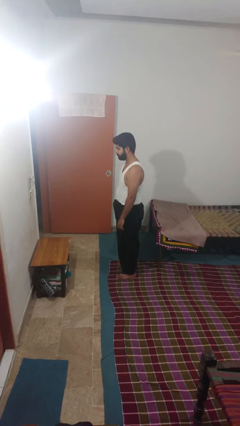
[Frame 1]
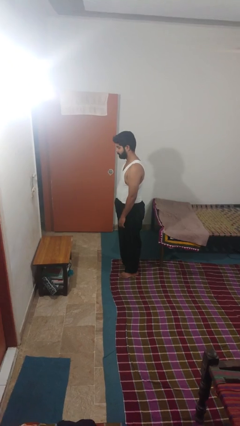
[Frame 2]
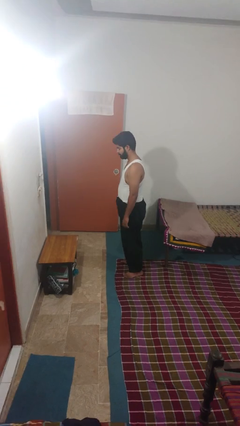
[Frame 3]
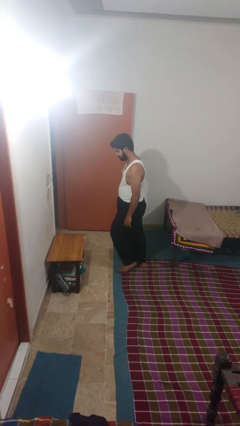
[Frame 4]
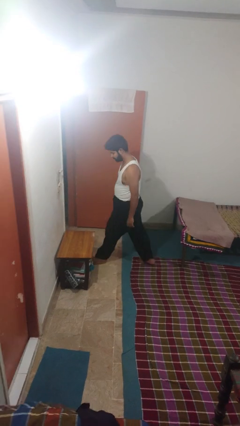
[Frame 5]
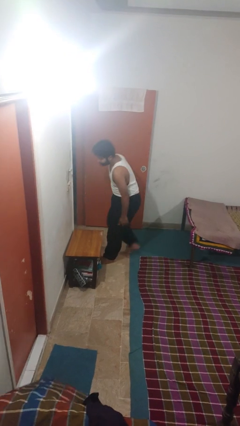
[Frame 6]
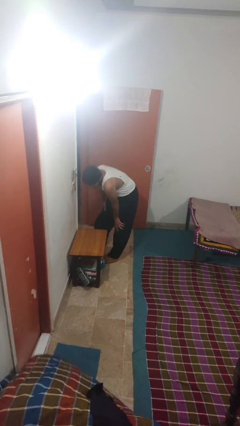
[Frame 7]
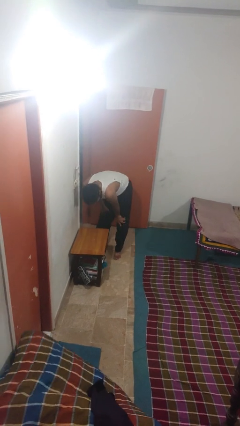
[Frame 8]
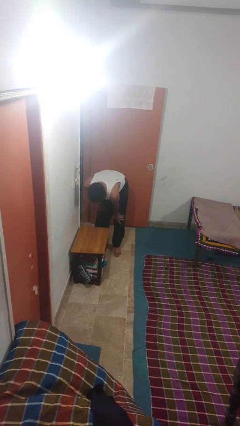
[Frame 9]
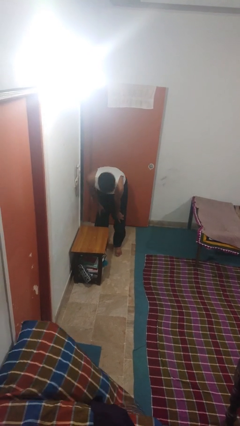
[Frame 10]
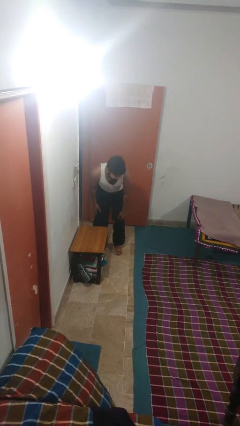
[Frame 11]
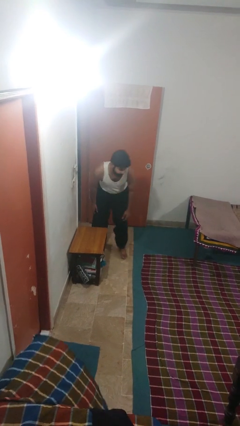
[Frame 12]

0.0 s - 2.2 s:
person bumps into table

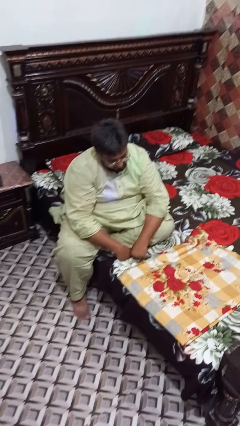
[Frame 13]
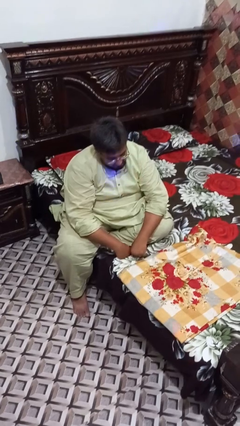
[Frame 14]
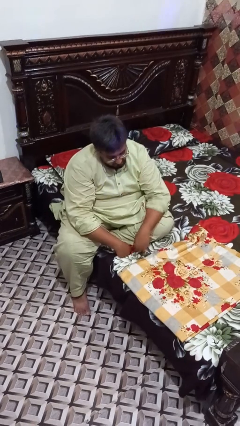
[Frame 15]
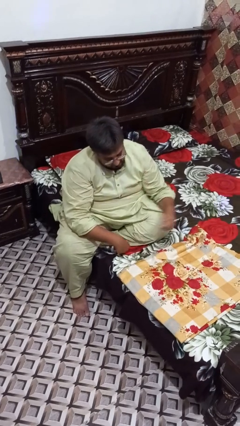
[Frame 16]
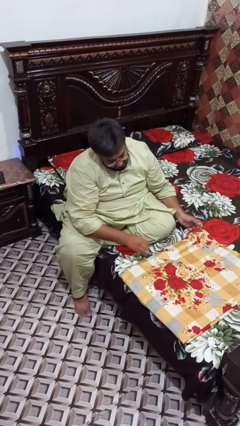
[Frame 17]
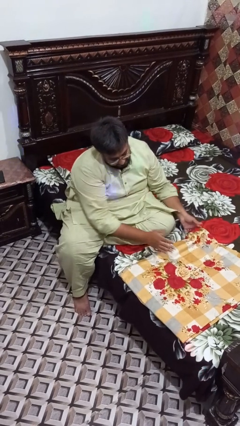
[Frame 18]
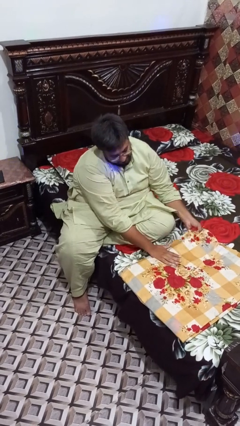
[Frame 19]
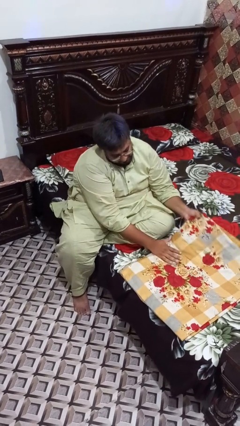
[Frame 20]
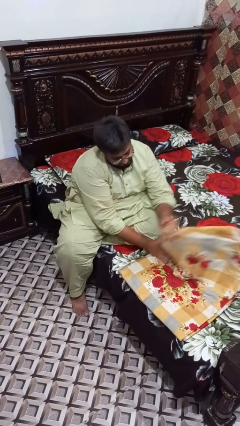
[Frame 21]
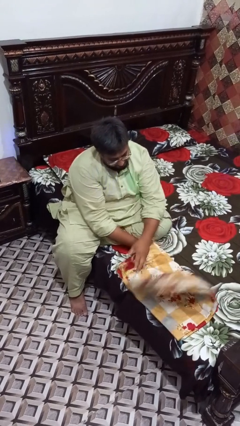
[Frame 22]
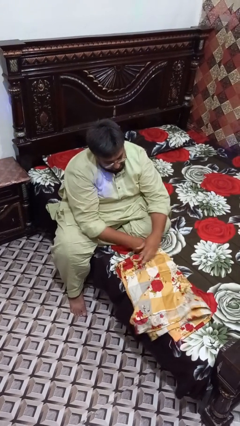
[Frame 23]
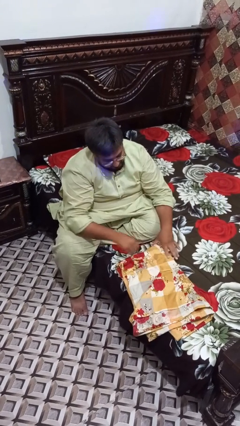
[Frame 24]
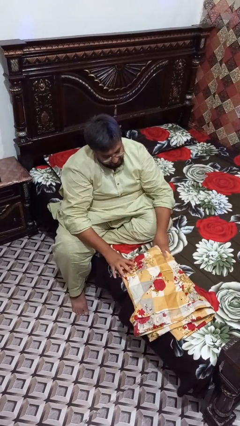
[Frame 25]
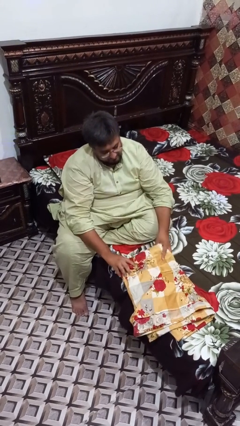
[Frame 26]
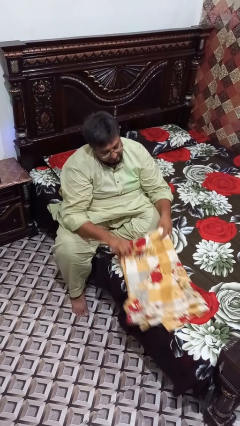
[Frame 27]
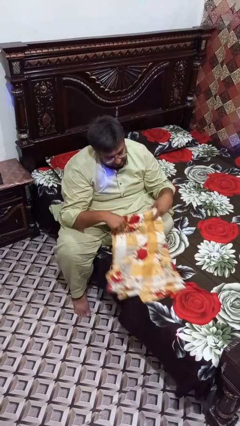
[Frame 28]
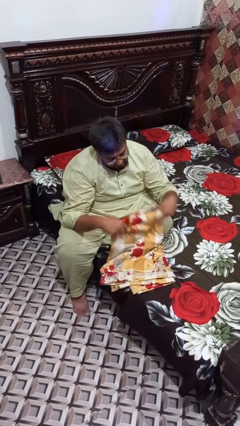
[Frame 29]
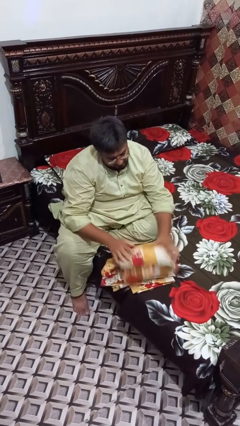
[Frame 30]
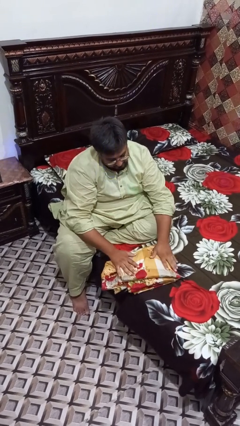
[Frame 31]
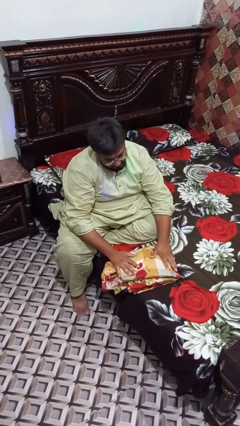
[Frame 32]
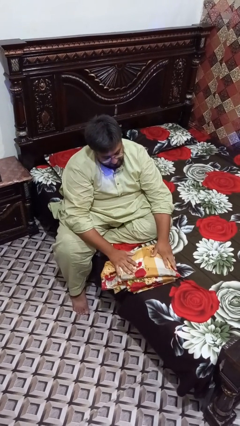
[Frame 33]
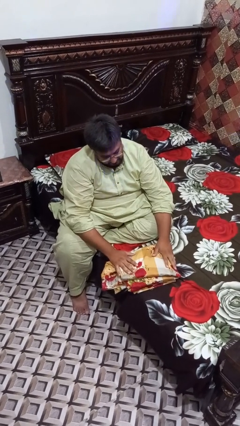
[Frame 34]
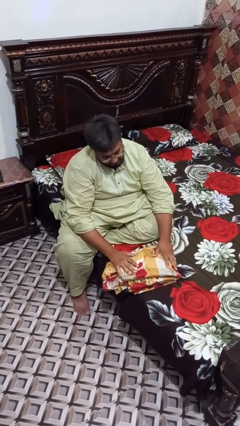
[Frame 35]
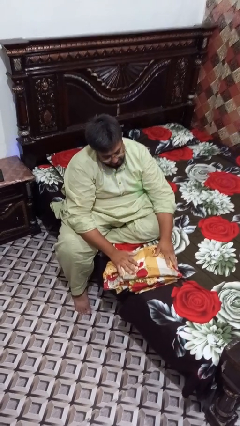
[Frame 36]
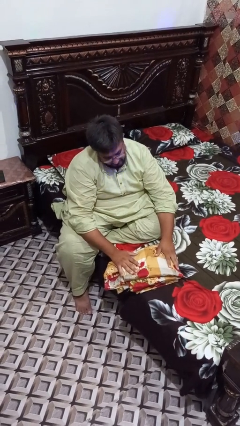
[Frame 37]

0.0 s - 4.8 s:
person folds blanket

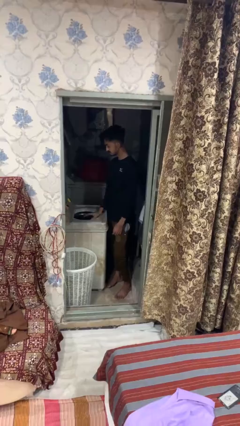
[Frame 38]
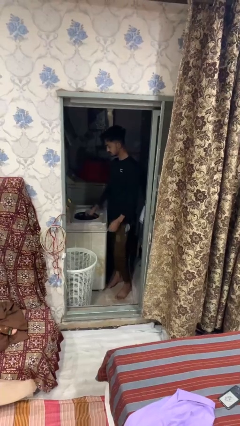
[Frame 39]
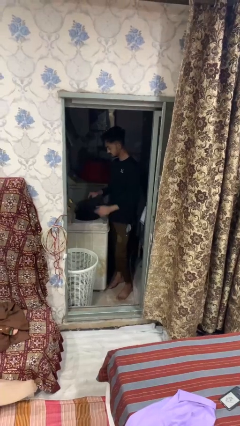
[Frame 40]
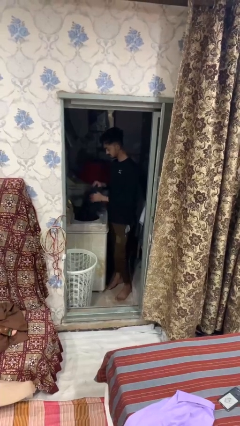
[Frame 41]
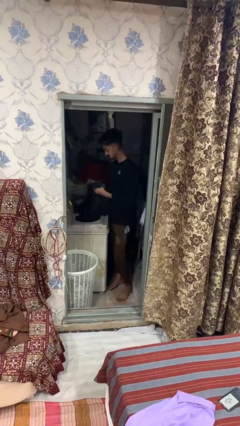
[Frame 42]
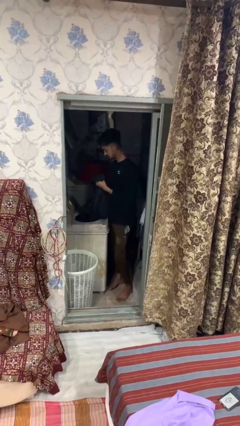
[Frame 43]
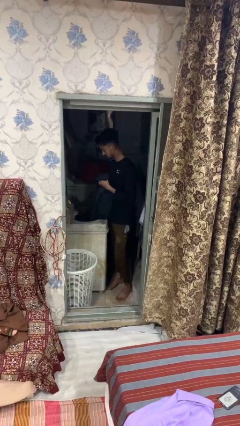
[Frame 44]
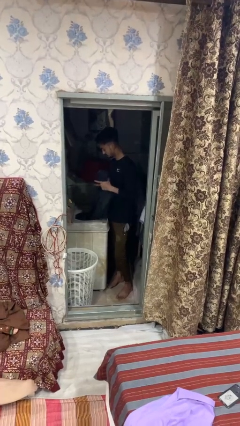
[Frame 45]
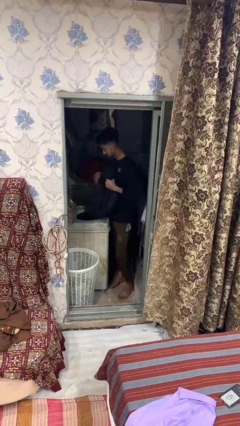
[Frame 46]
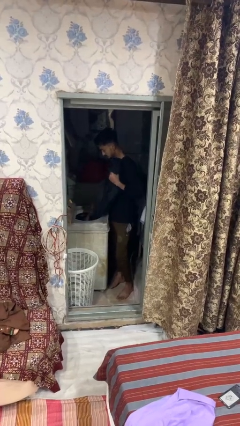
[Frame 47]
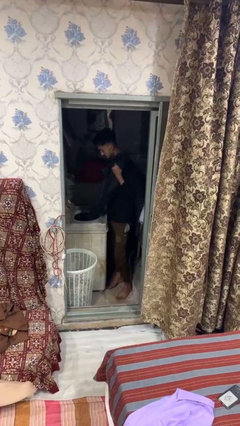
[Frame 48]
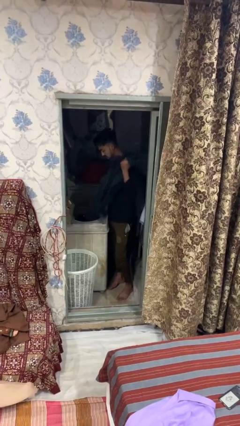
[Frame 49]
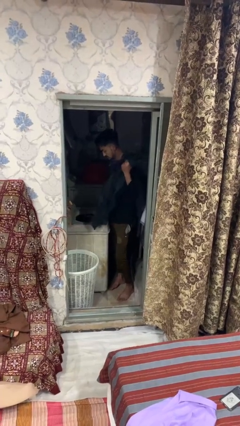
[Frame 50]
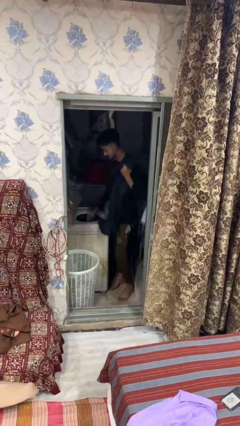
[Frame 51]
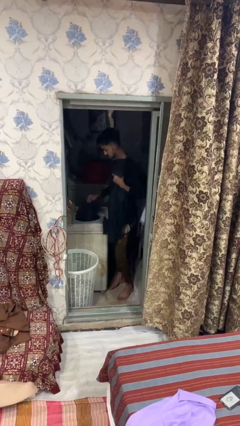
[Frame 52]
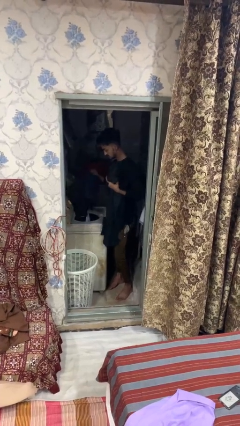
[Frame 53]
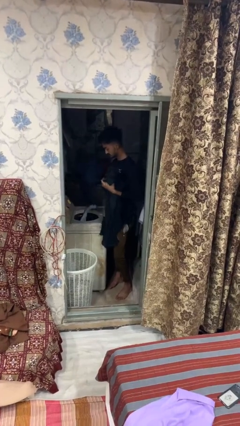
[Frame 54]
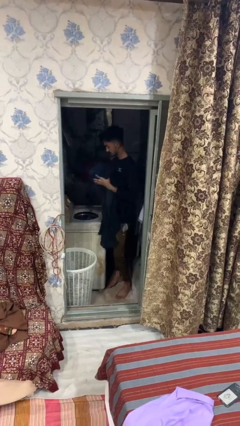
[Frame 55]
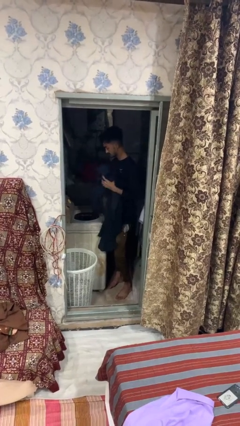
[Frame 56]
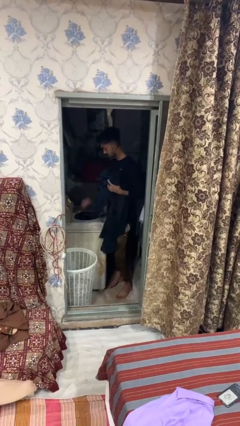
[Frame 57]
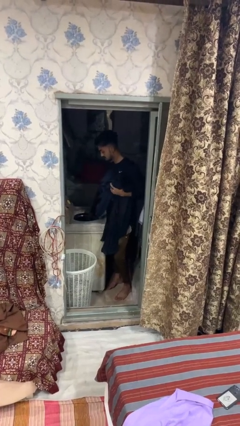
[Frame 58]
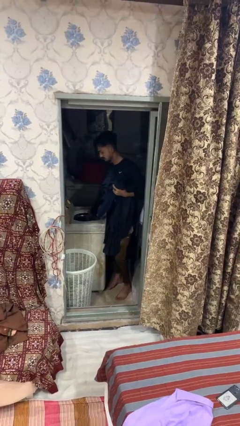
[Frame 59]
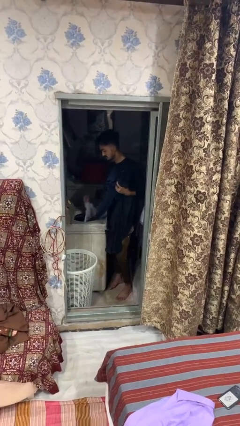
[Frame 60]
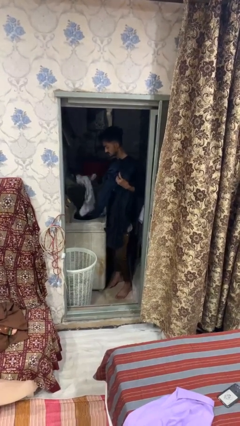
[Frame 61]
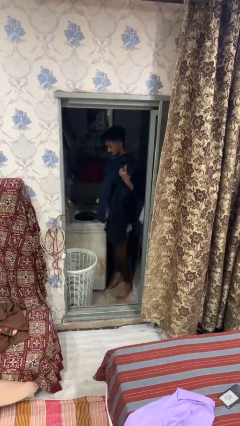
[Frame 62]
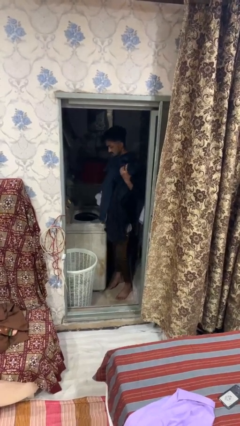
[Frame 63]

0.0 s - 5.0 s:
person unloads clotheswasher

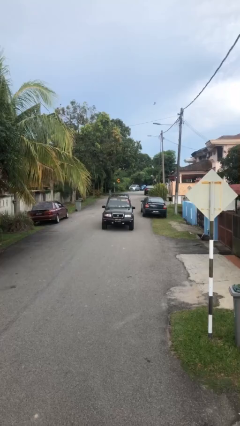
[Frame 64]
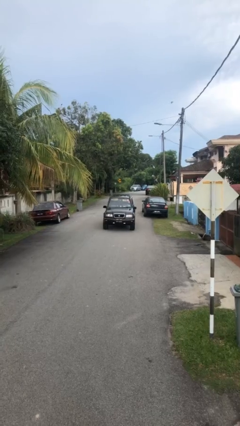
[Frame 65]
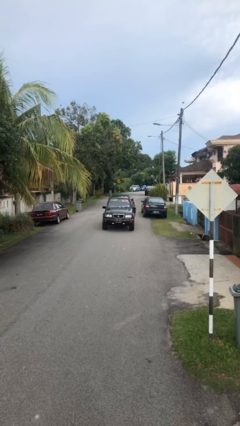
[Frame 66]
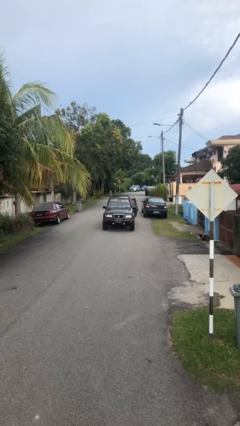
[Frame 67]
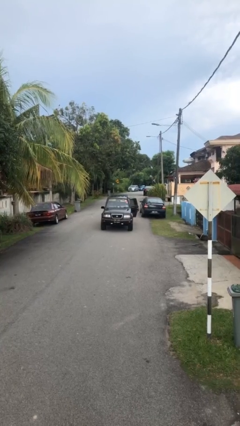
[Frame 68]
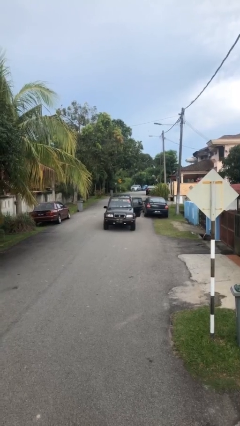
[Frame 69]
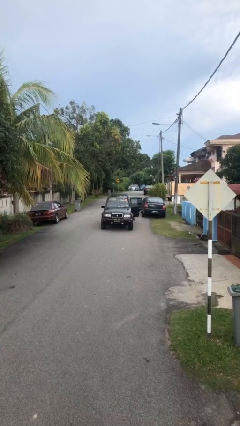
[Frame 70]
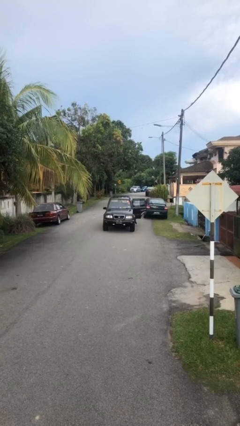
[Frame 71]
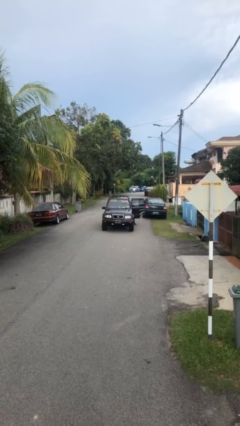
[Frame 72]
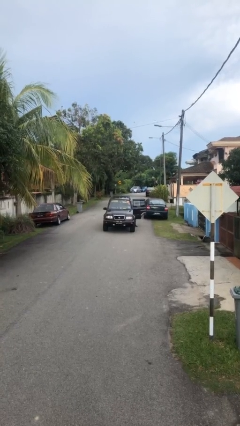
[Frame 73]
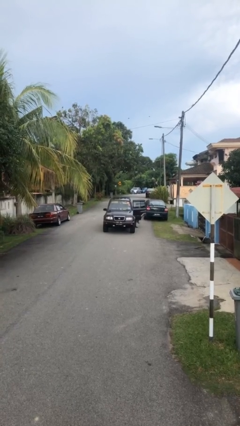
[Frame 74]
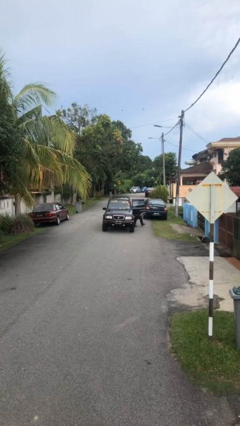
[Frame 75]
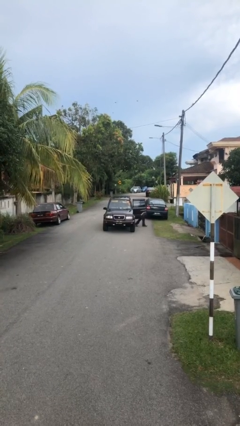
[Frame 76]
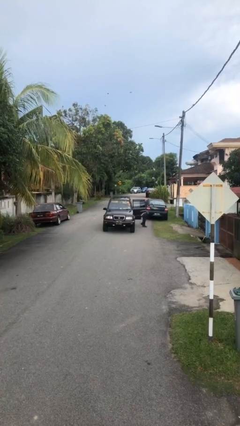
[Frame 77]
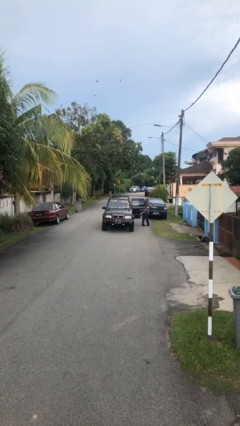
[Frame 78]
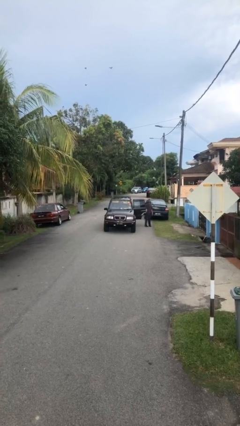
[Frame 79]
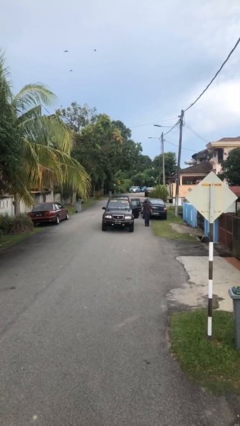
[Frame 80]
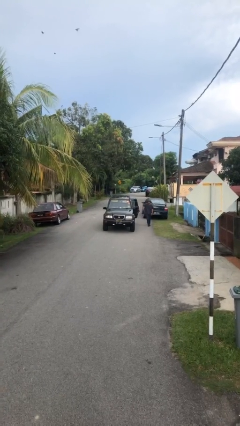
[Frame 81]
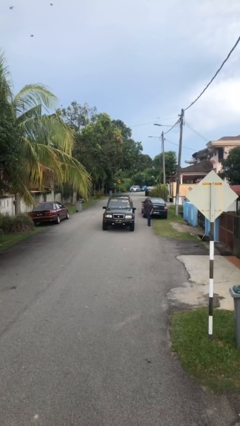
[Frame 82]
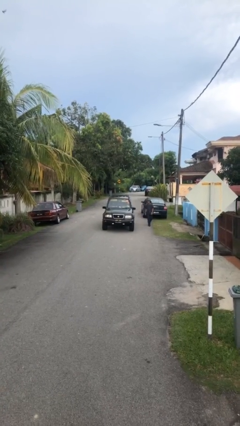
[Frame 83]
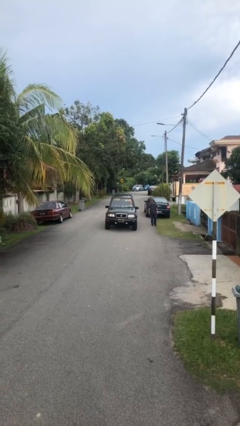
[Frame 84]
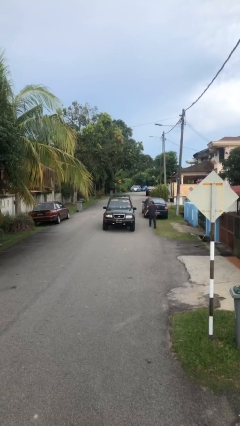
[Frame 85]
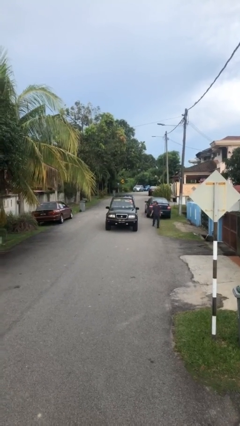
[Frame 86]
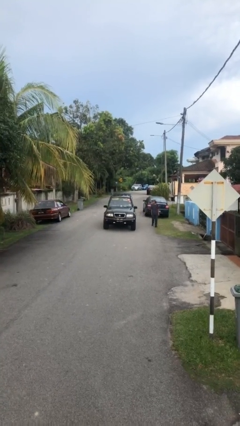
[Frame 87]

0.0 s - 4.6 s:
car drops off person

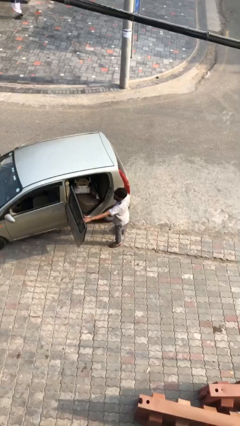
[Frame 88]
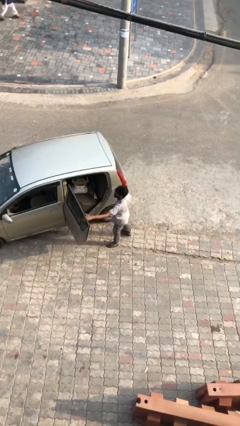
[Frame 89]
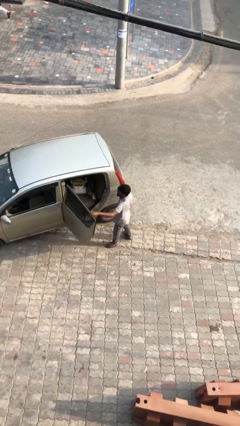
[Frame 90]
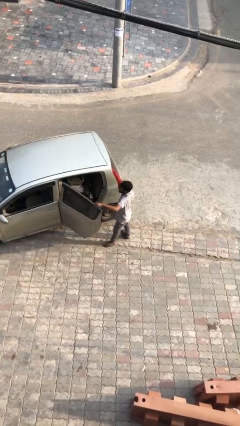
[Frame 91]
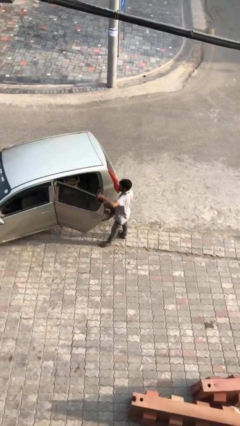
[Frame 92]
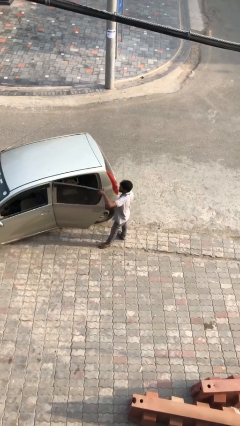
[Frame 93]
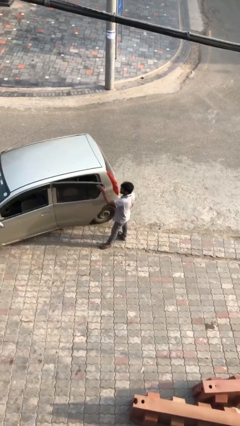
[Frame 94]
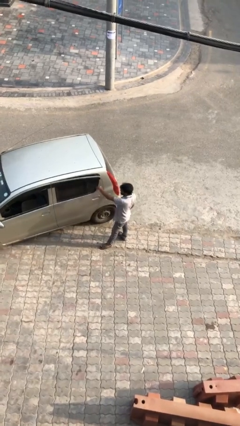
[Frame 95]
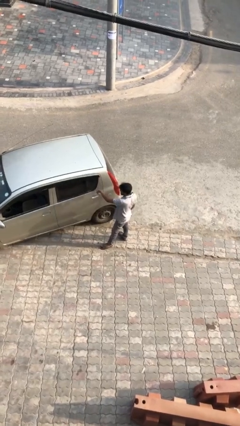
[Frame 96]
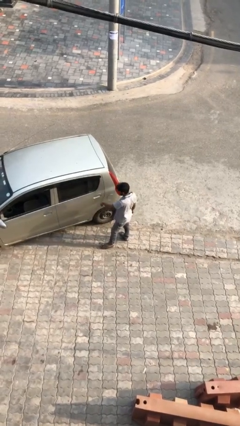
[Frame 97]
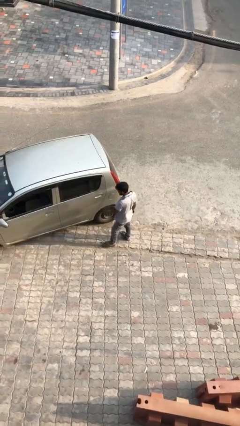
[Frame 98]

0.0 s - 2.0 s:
person closes car door
